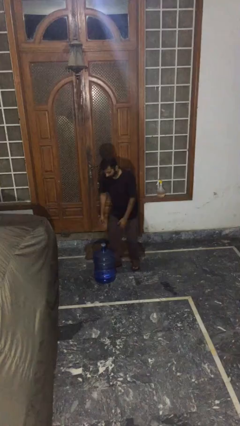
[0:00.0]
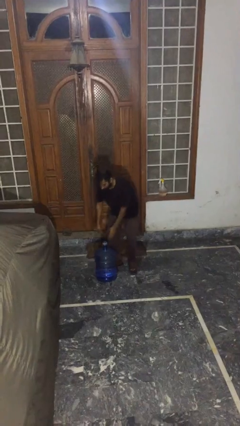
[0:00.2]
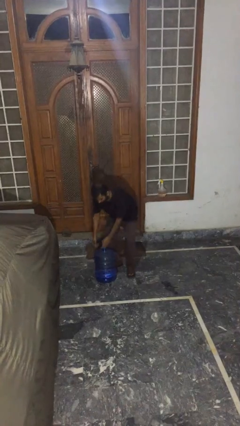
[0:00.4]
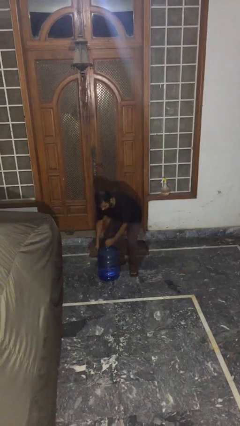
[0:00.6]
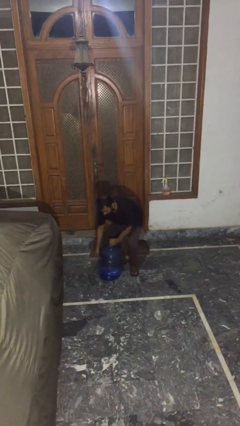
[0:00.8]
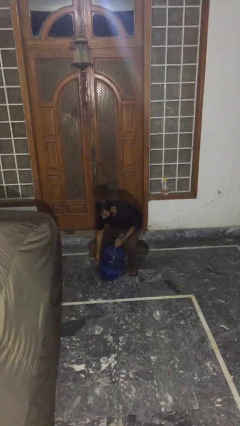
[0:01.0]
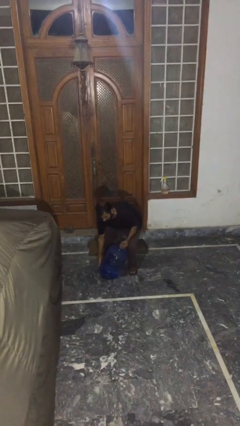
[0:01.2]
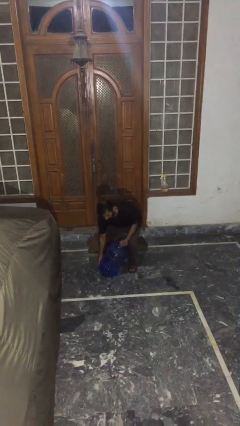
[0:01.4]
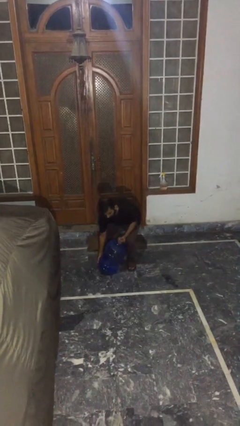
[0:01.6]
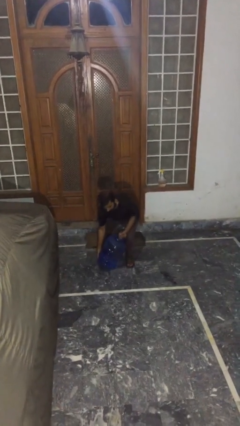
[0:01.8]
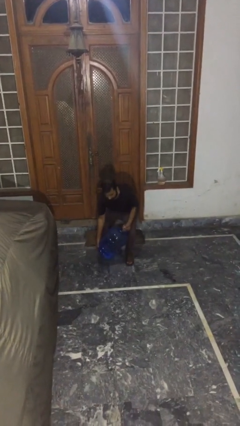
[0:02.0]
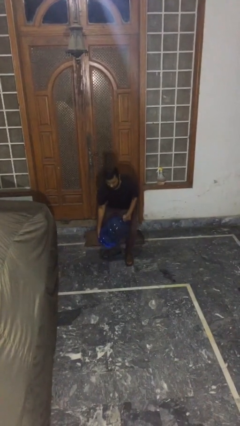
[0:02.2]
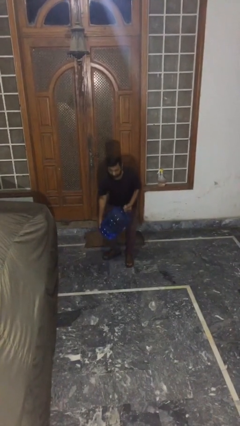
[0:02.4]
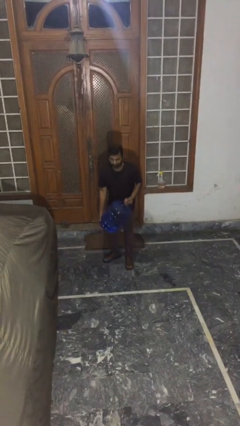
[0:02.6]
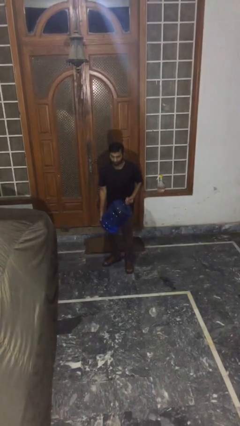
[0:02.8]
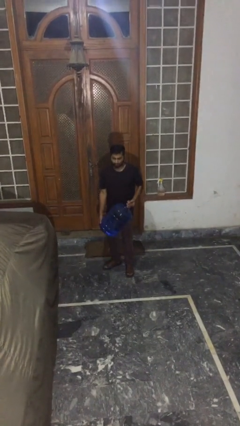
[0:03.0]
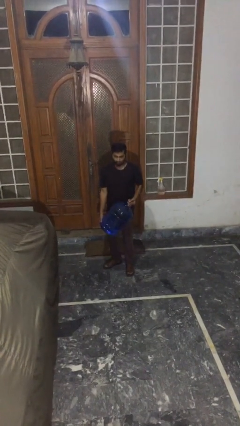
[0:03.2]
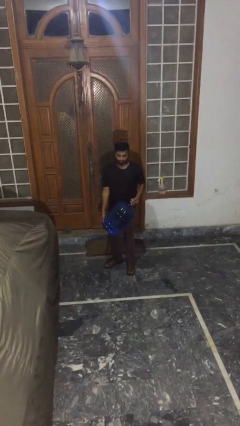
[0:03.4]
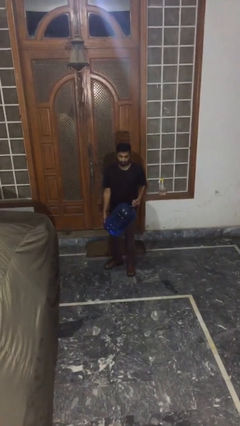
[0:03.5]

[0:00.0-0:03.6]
person picks up object from floor

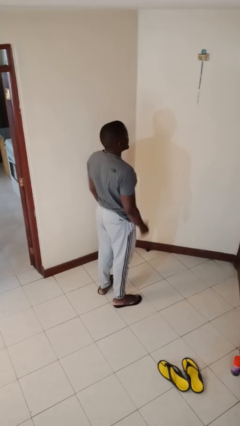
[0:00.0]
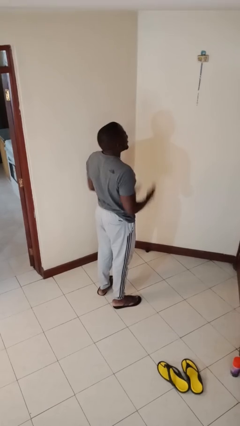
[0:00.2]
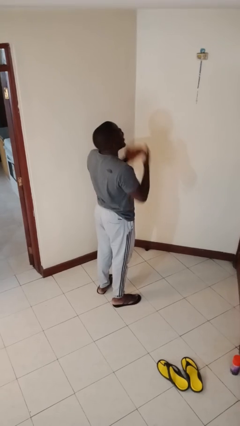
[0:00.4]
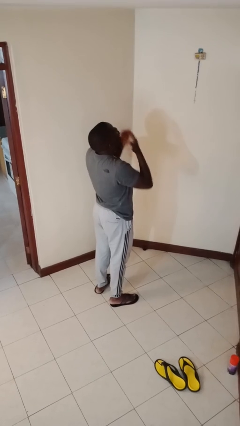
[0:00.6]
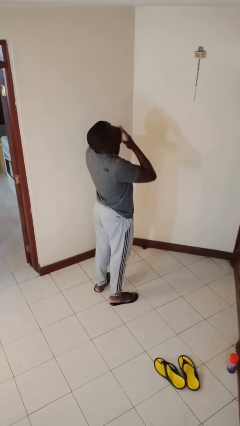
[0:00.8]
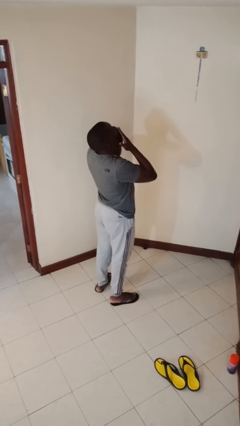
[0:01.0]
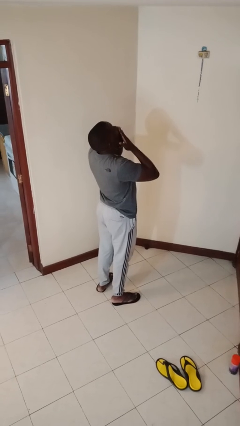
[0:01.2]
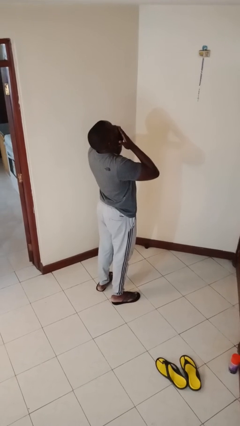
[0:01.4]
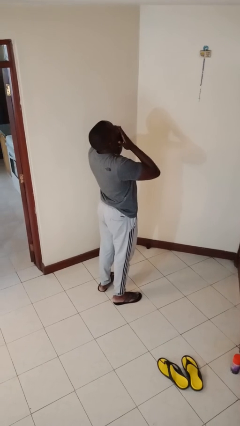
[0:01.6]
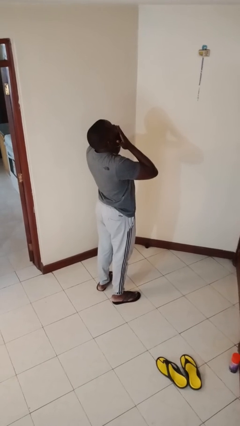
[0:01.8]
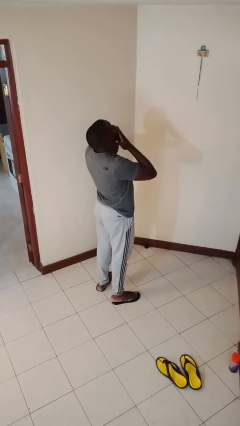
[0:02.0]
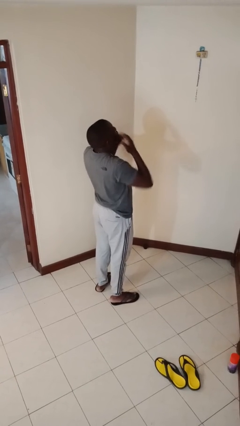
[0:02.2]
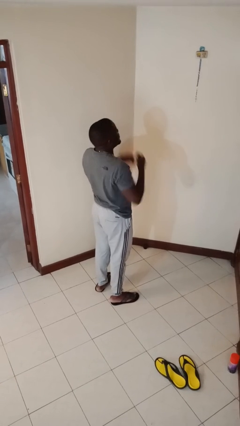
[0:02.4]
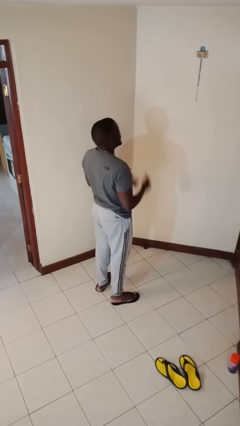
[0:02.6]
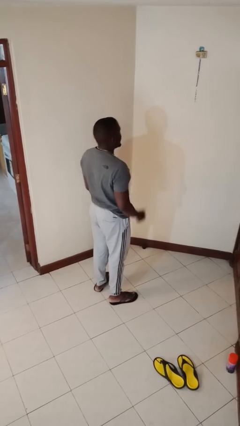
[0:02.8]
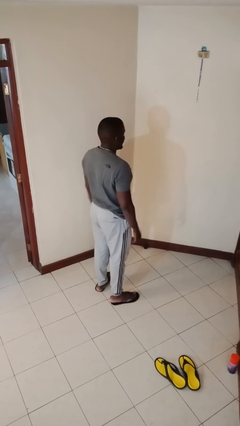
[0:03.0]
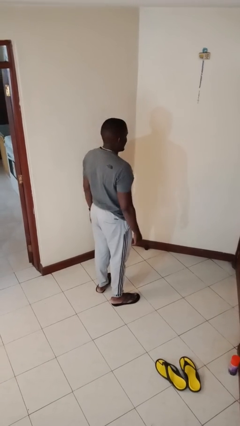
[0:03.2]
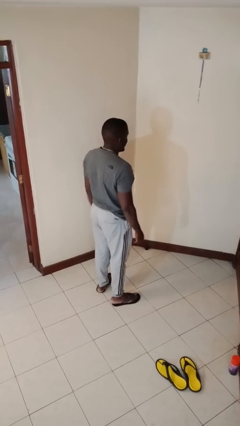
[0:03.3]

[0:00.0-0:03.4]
person yawns

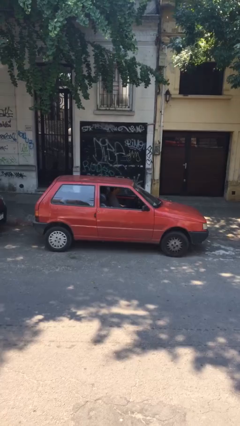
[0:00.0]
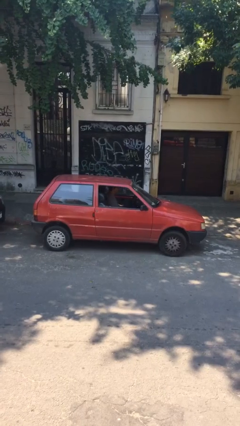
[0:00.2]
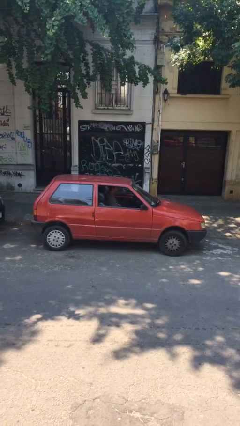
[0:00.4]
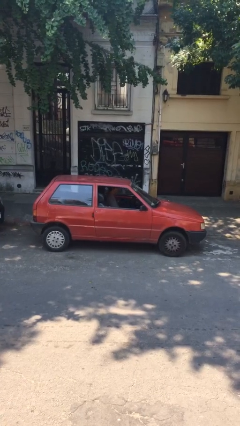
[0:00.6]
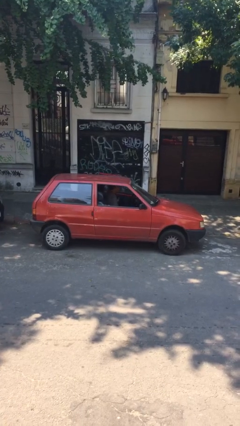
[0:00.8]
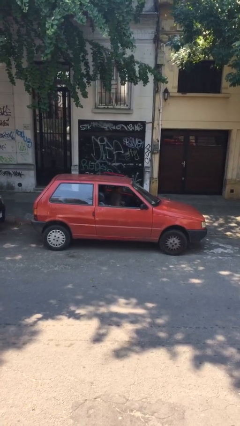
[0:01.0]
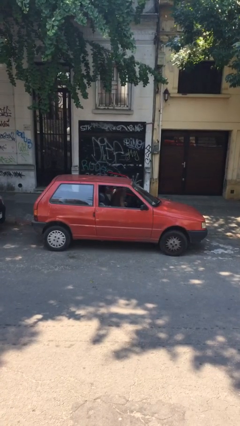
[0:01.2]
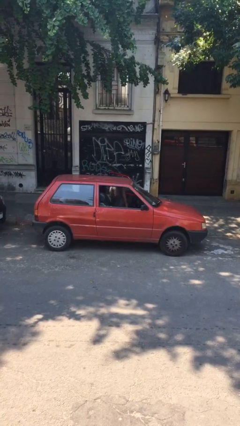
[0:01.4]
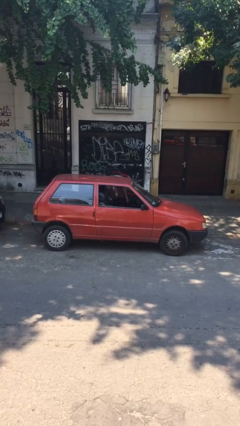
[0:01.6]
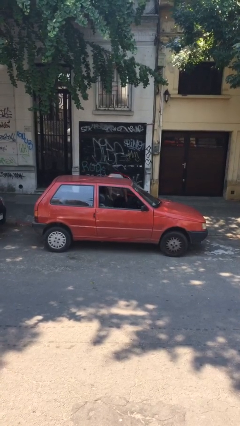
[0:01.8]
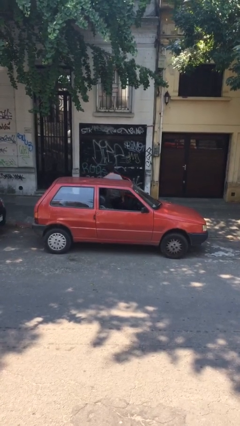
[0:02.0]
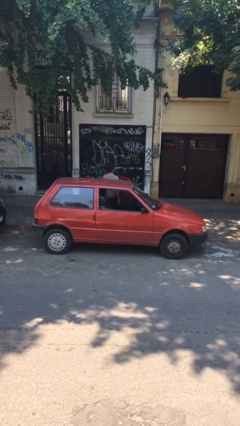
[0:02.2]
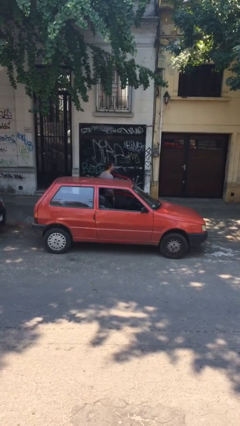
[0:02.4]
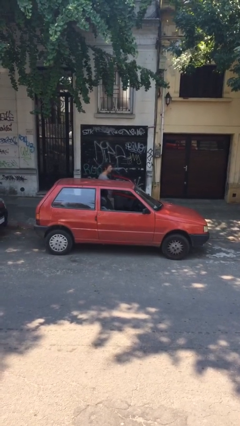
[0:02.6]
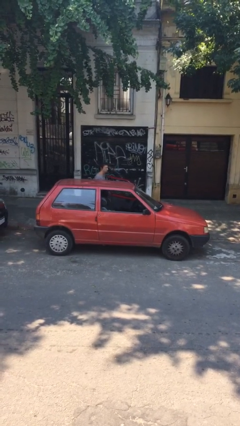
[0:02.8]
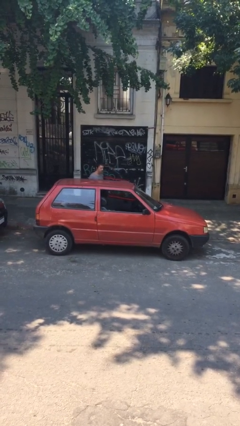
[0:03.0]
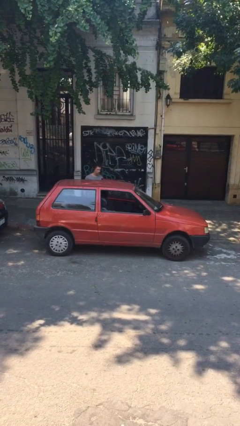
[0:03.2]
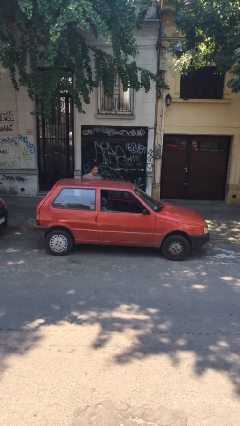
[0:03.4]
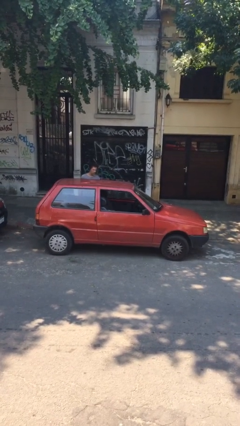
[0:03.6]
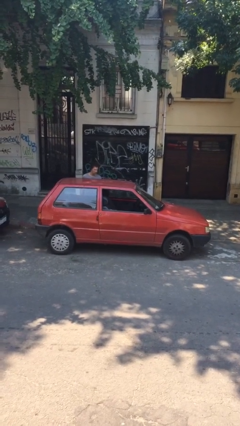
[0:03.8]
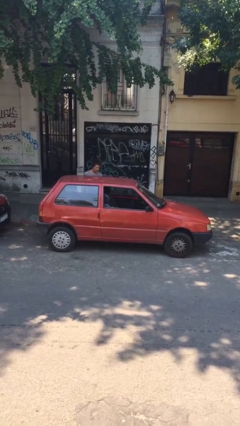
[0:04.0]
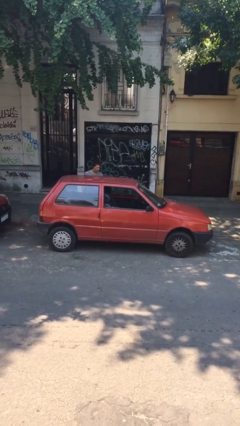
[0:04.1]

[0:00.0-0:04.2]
car drops off person

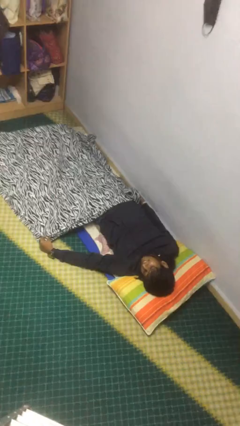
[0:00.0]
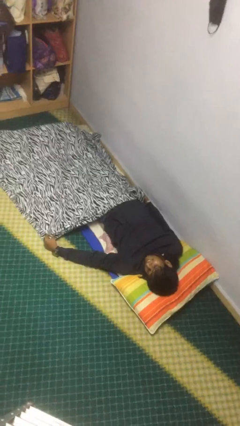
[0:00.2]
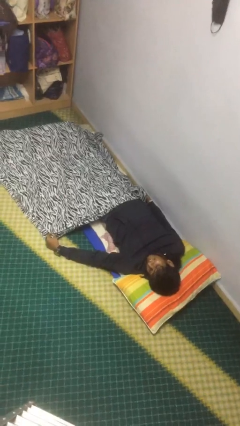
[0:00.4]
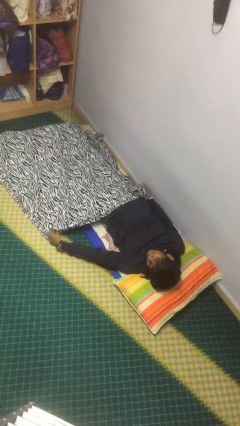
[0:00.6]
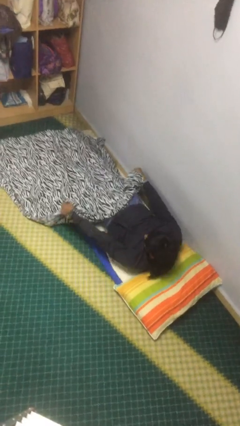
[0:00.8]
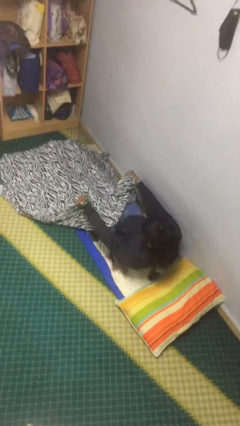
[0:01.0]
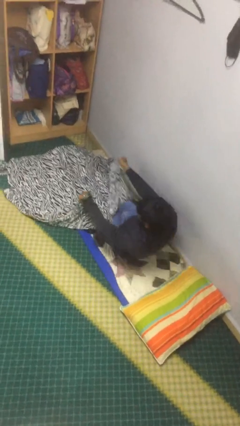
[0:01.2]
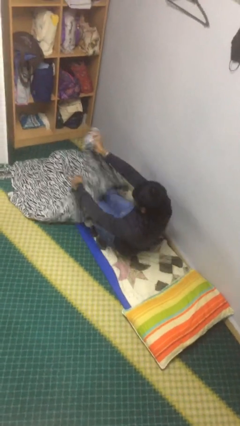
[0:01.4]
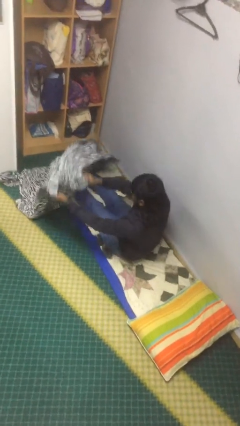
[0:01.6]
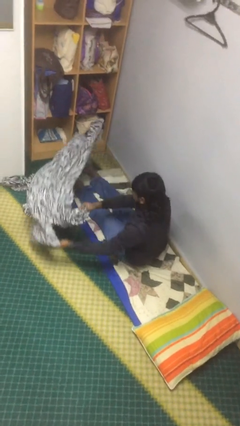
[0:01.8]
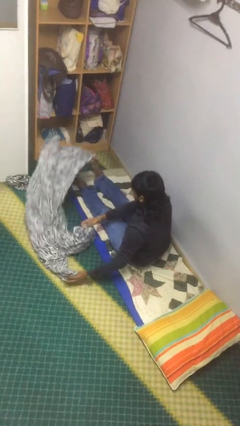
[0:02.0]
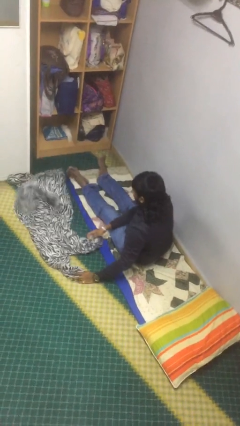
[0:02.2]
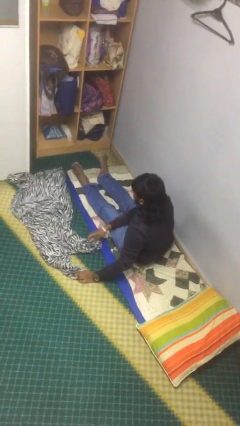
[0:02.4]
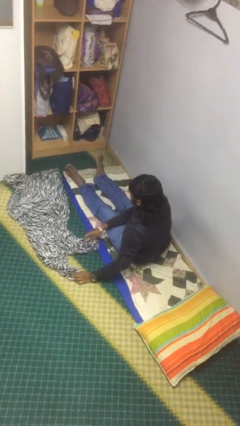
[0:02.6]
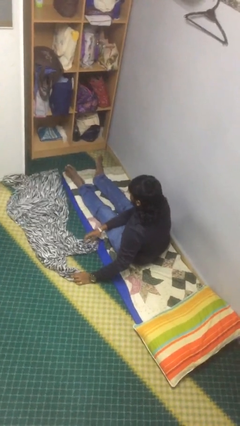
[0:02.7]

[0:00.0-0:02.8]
person uncovers with blanket

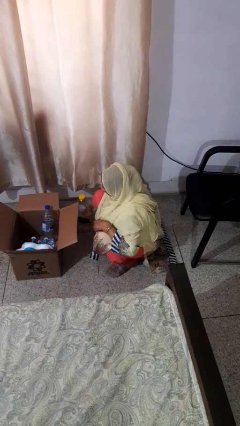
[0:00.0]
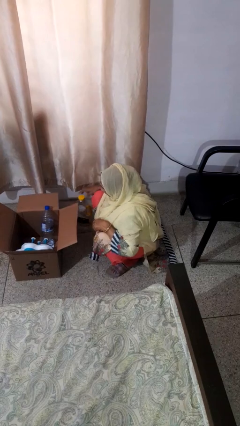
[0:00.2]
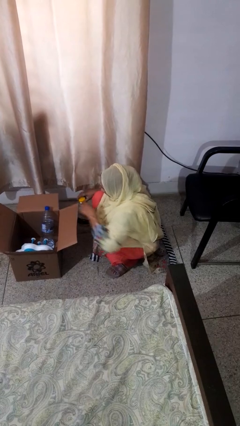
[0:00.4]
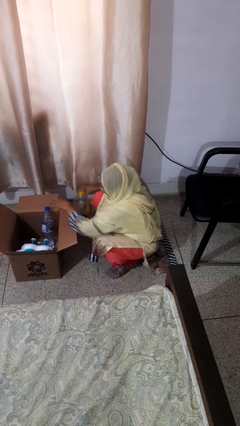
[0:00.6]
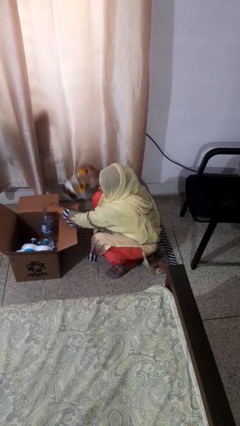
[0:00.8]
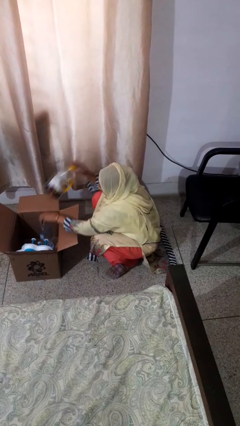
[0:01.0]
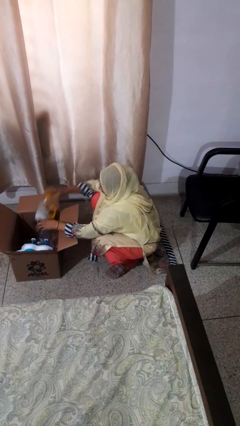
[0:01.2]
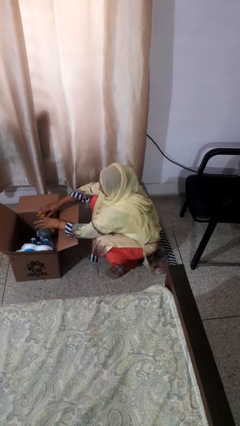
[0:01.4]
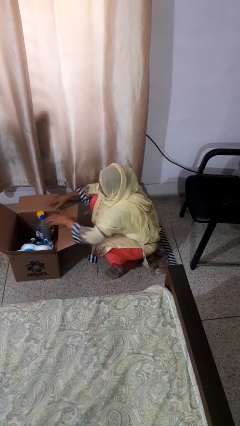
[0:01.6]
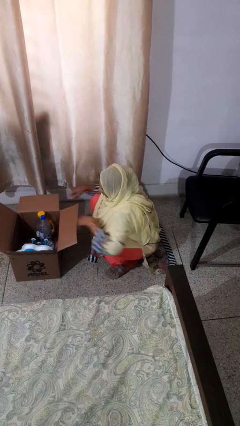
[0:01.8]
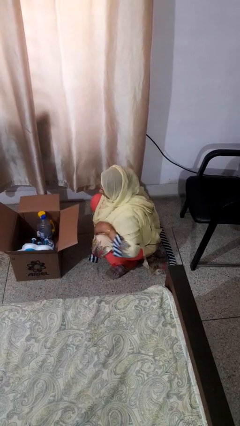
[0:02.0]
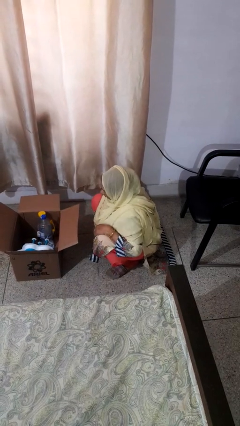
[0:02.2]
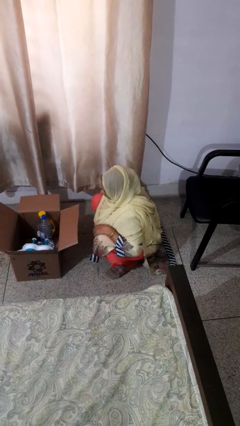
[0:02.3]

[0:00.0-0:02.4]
person puts object into box

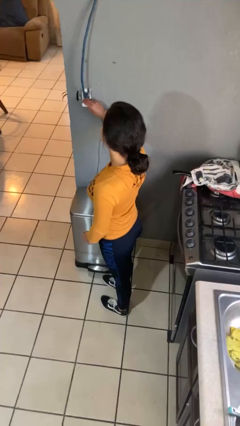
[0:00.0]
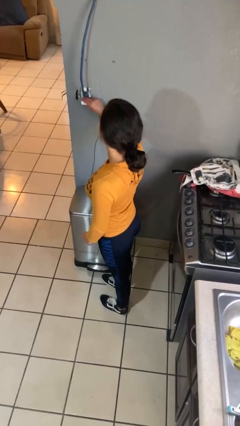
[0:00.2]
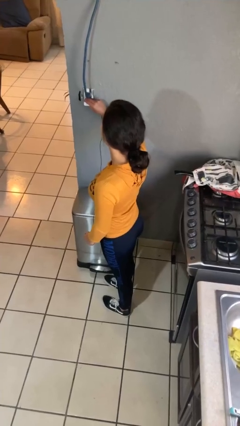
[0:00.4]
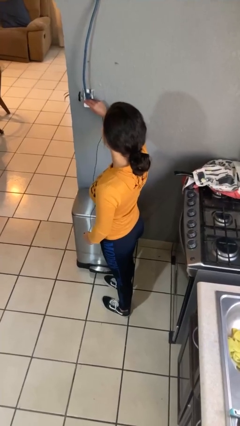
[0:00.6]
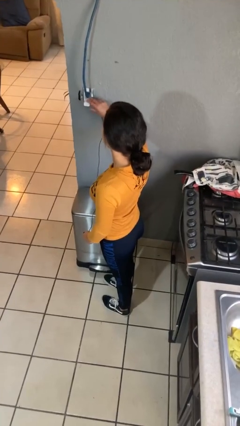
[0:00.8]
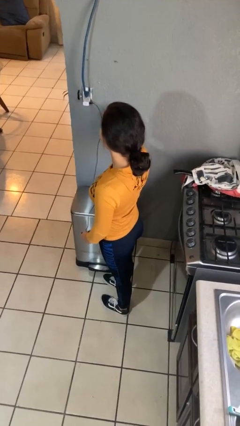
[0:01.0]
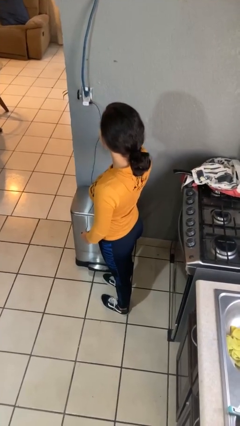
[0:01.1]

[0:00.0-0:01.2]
person plugs into electrical socket
